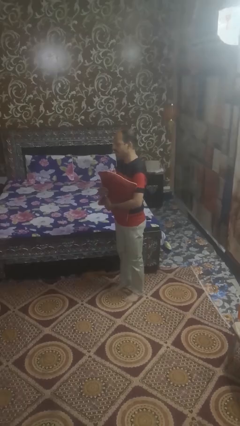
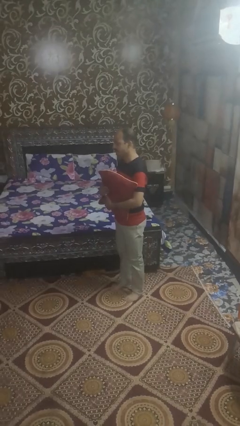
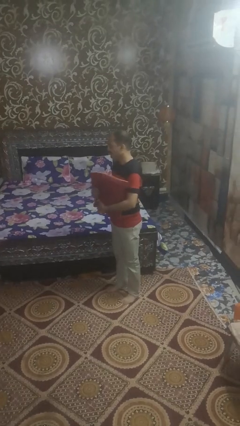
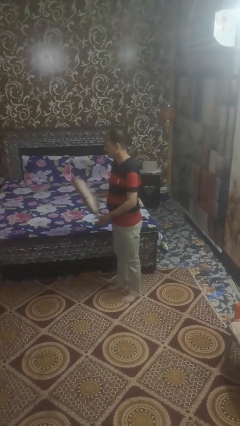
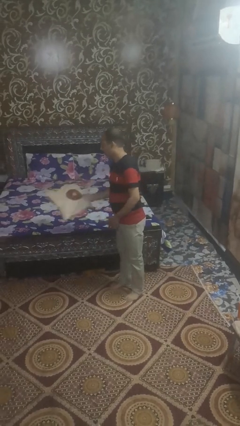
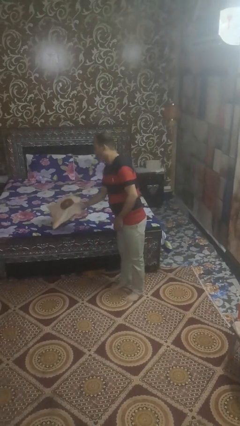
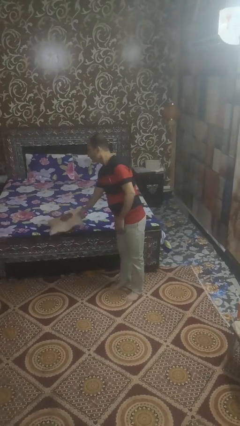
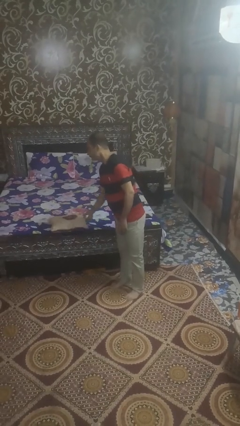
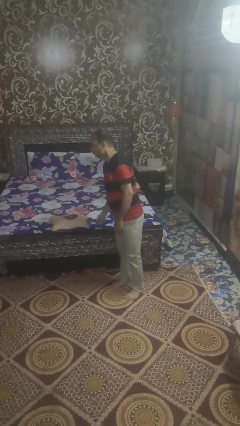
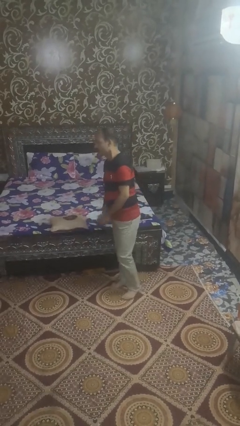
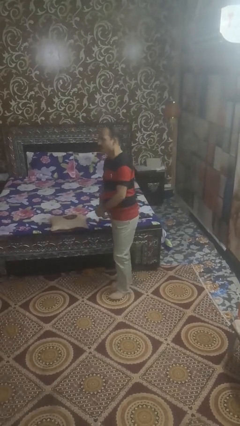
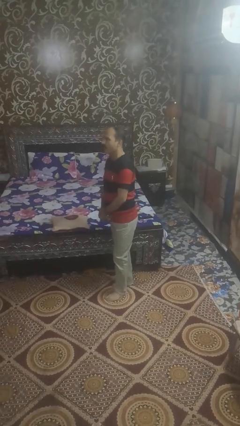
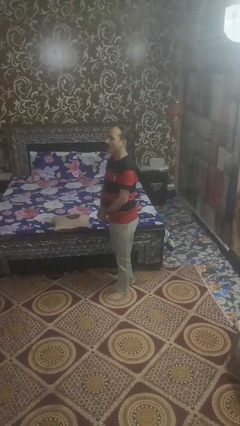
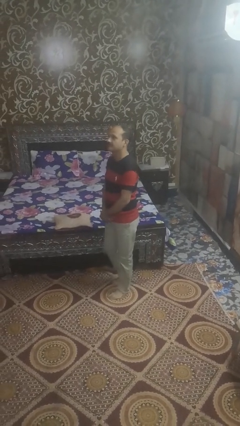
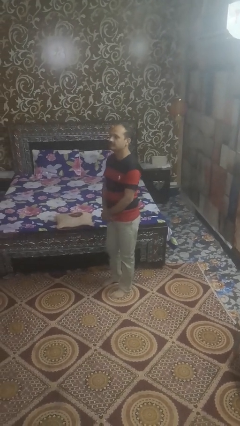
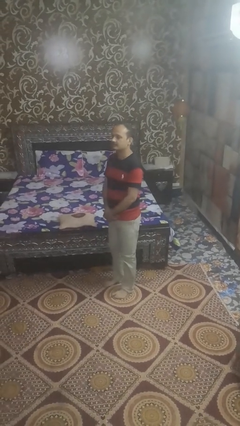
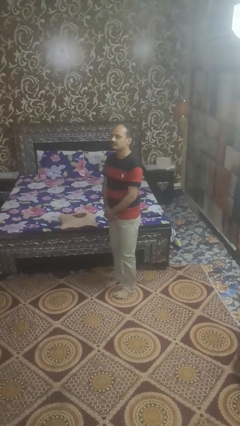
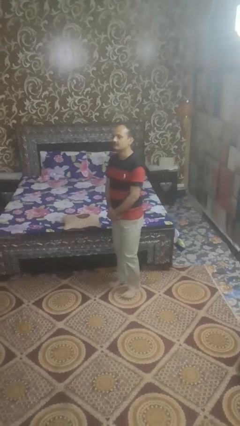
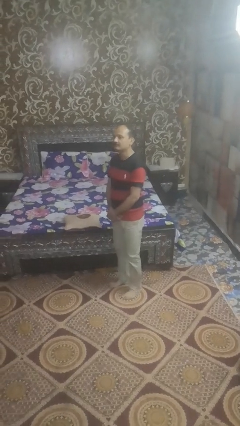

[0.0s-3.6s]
person puts down object on bed

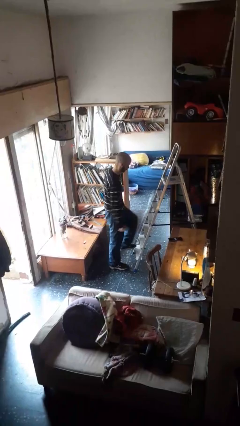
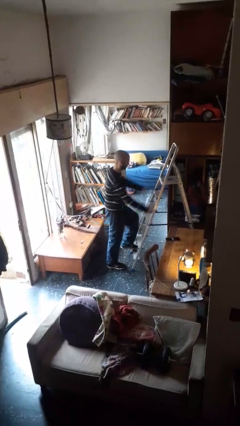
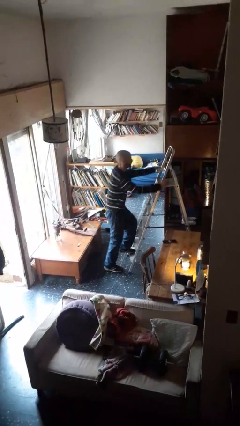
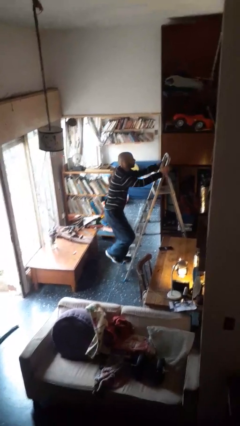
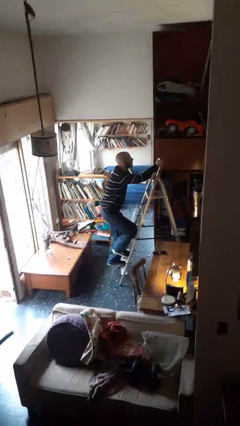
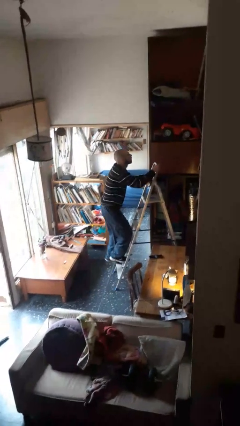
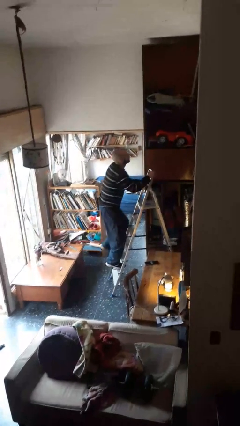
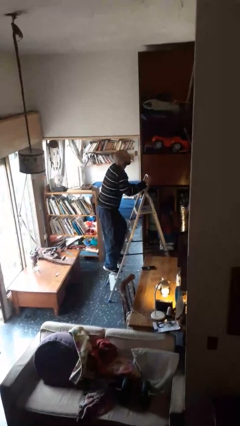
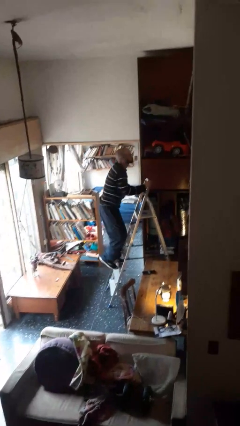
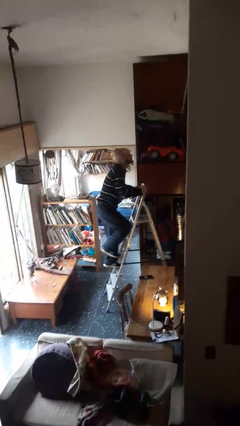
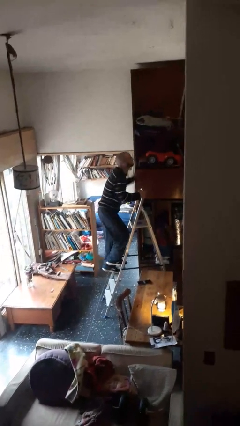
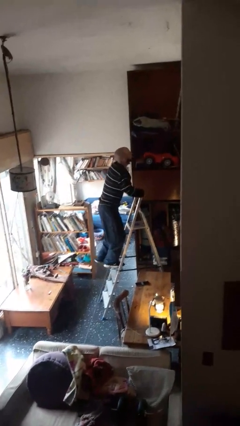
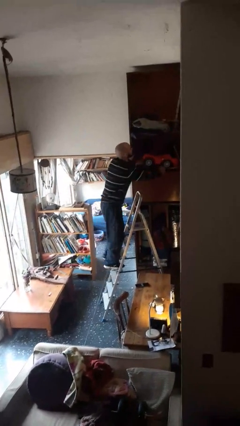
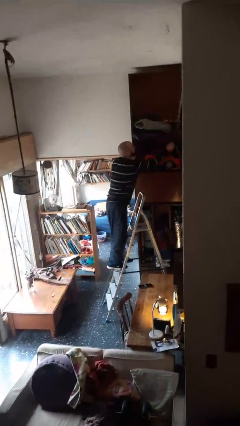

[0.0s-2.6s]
person climbs up ladder

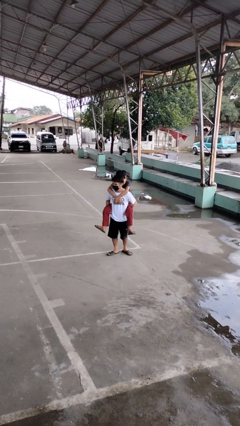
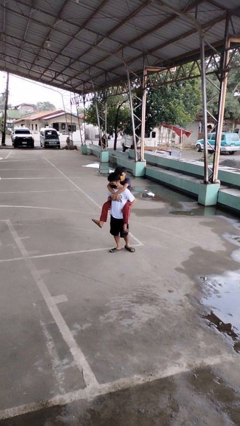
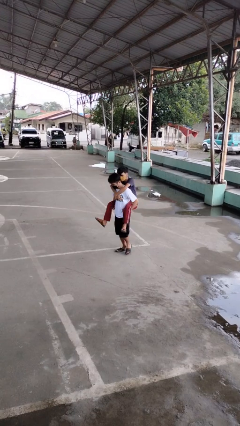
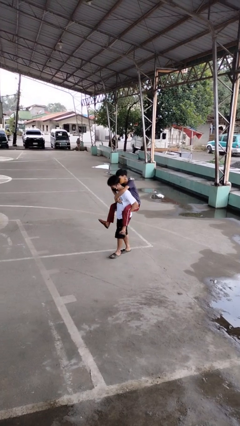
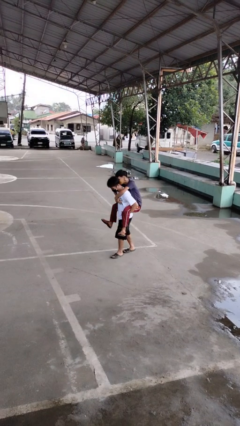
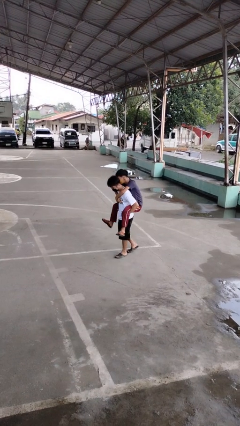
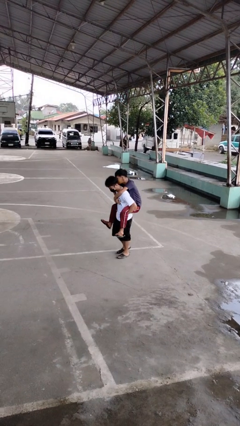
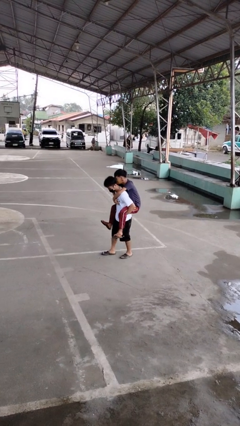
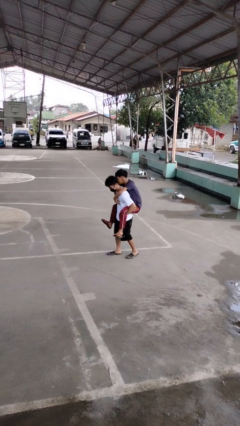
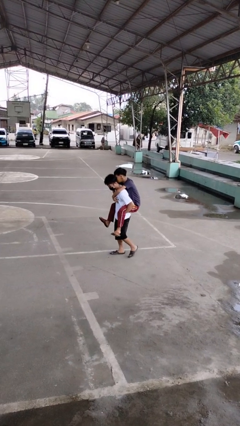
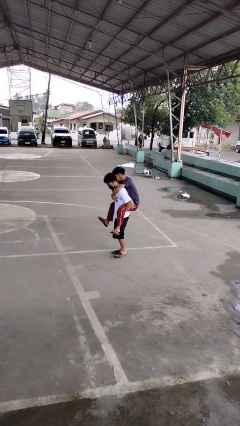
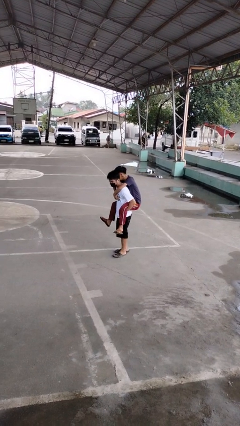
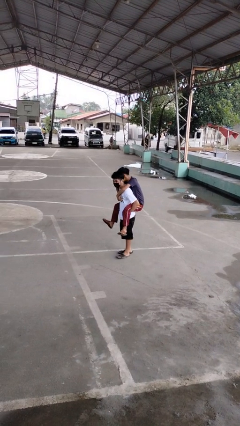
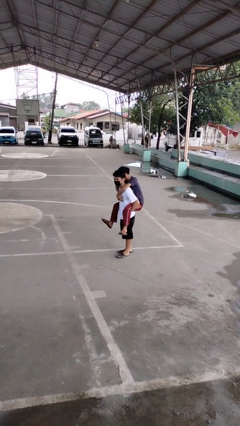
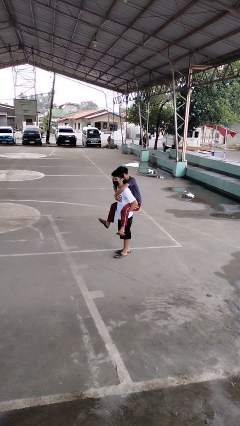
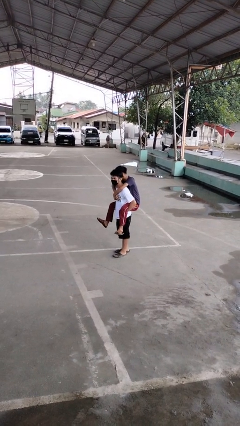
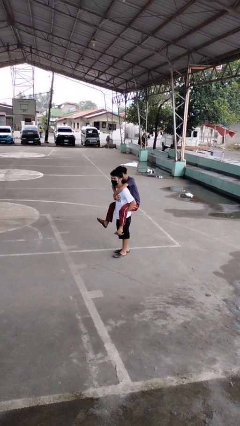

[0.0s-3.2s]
person carries person on back

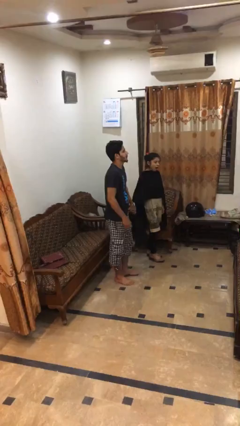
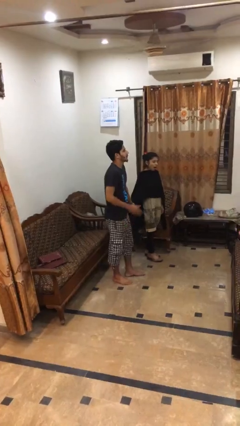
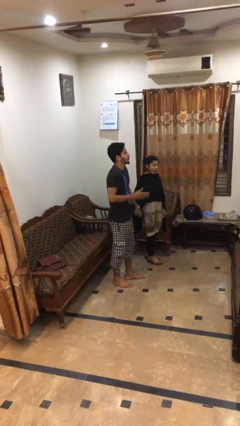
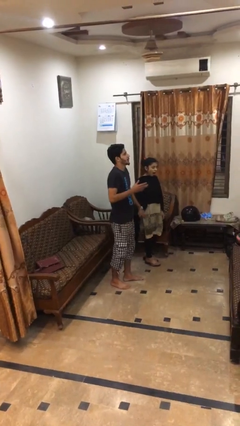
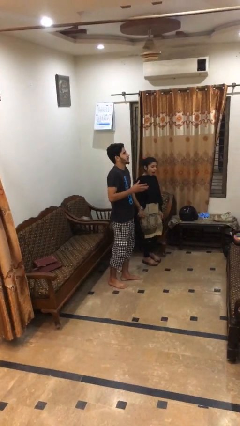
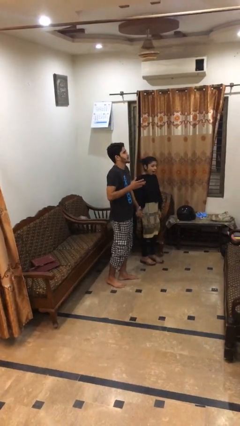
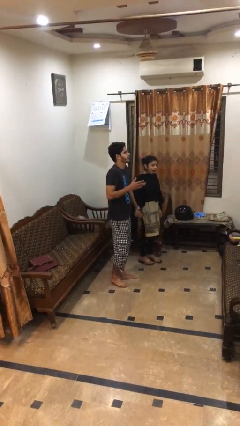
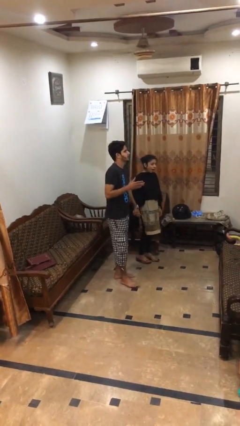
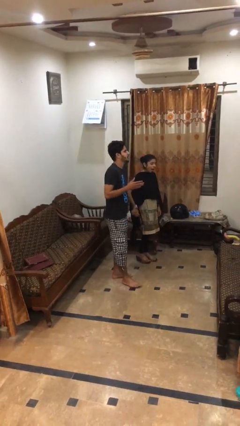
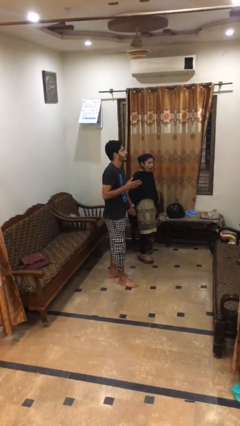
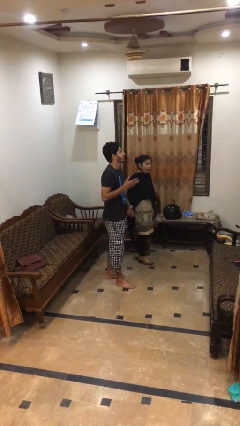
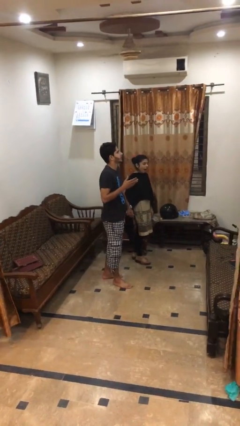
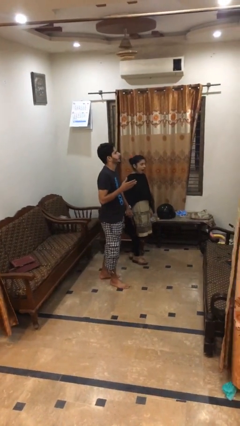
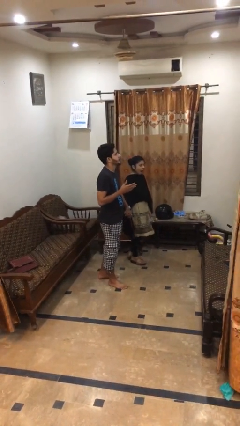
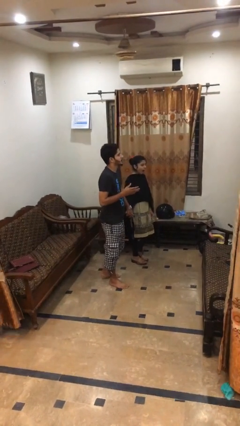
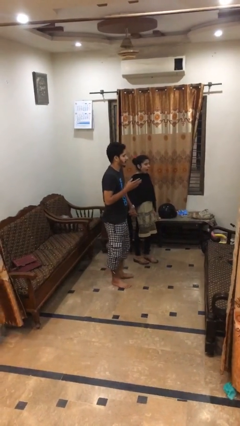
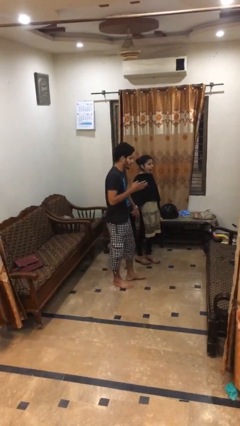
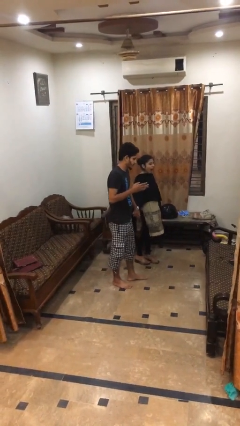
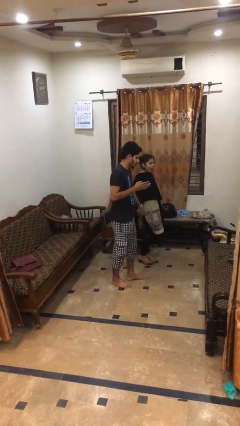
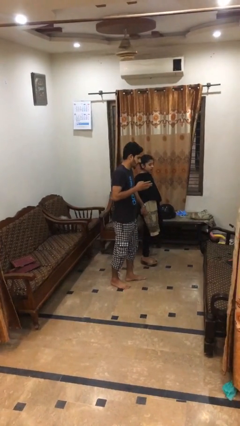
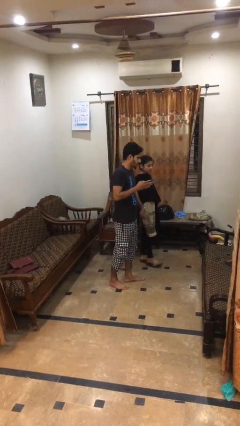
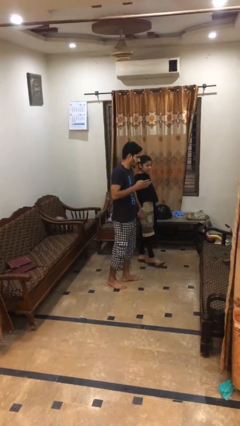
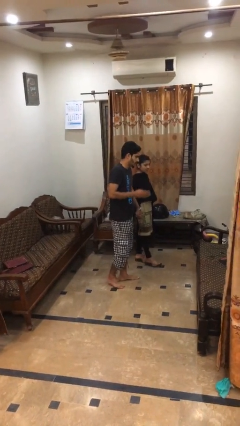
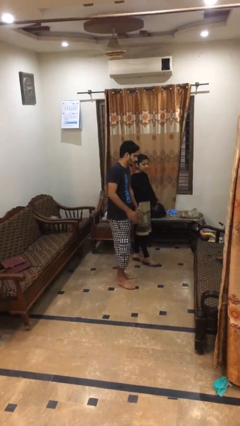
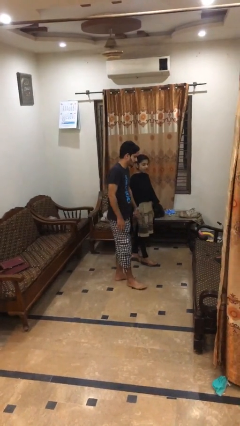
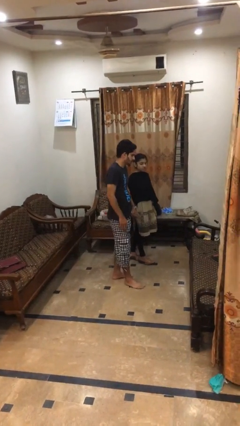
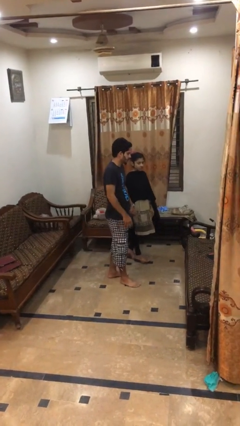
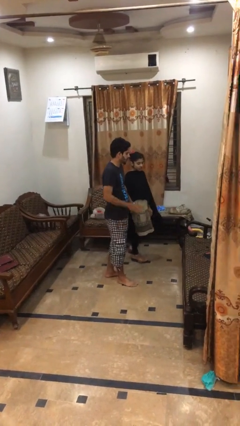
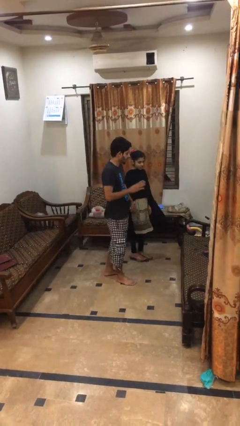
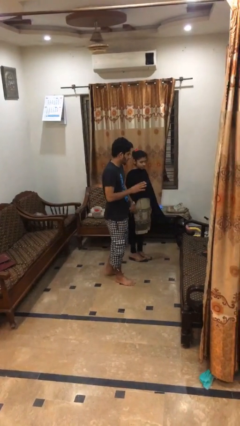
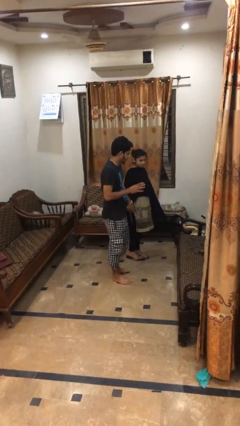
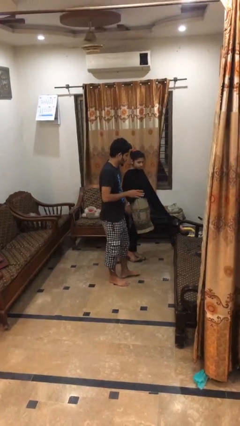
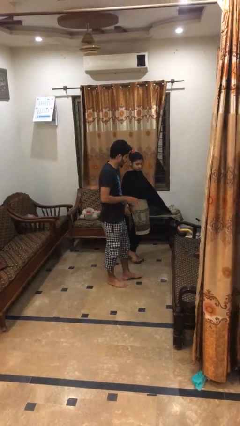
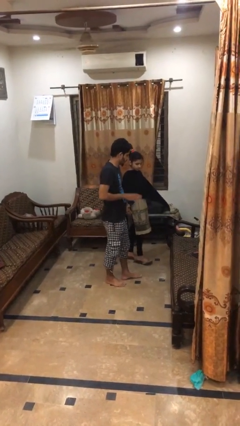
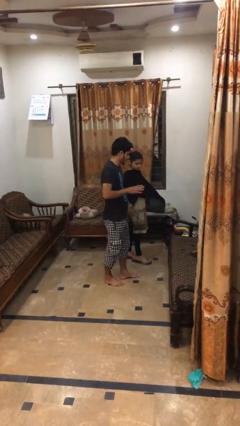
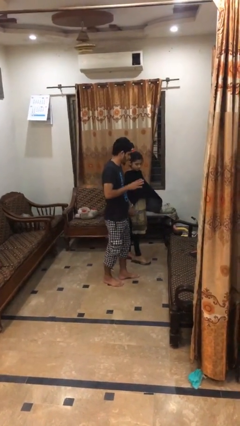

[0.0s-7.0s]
person holds hand

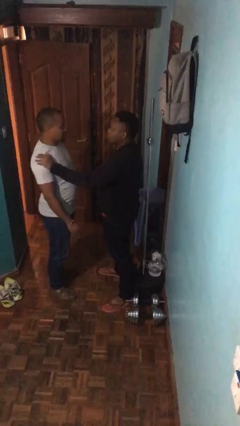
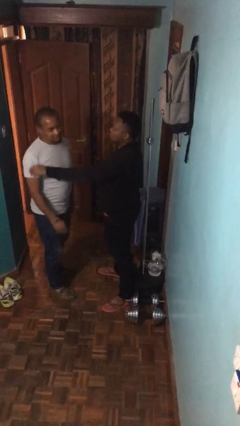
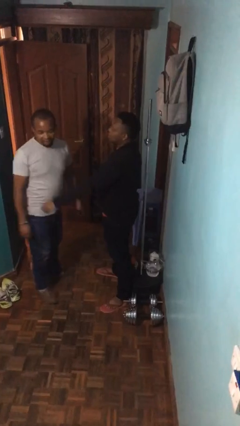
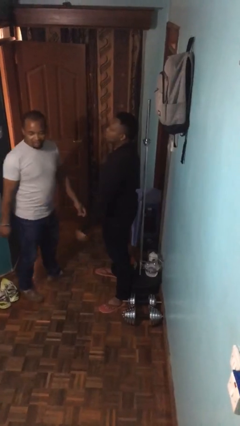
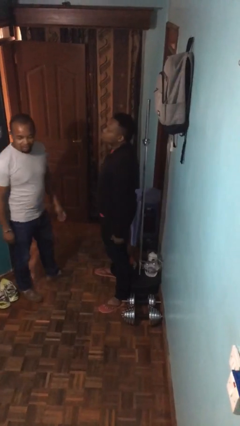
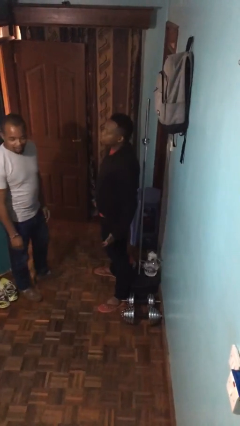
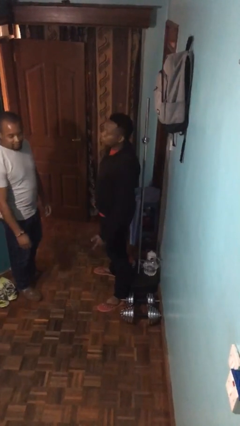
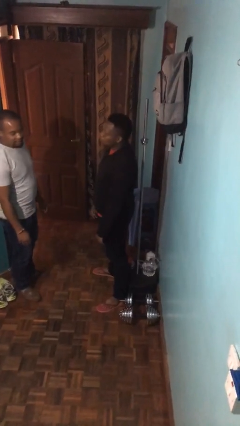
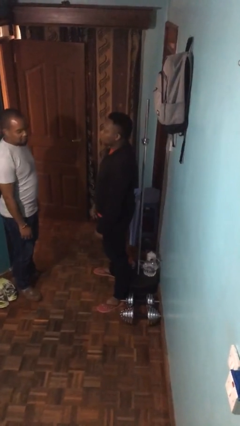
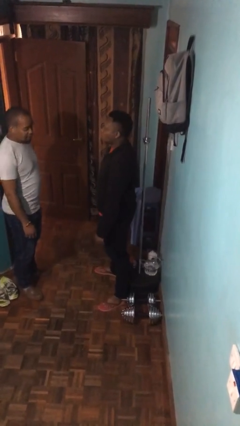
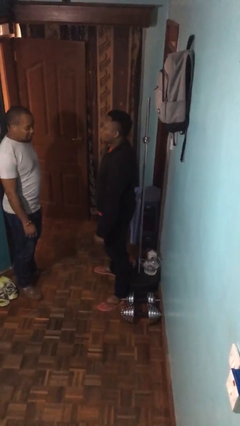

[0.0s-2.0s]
person shoves person
